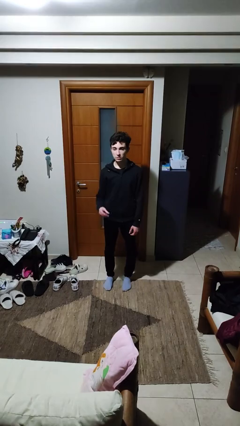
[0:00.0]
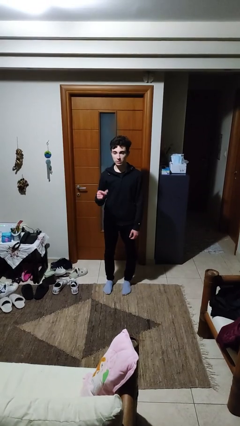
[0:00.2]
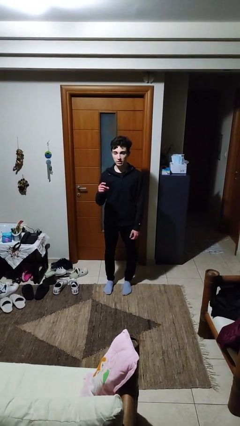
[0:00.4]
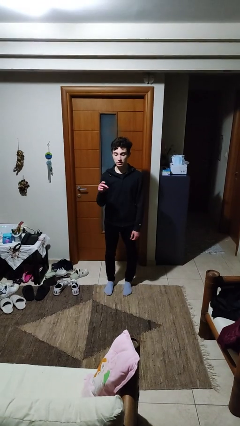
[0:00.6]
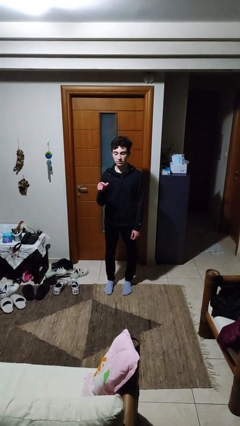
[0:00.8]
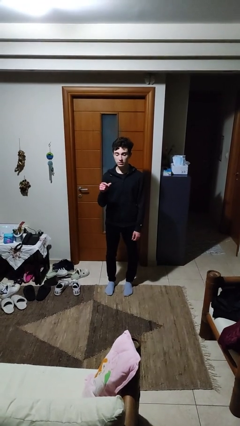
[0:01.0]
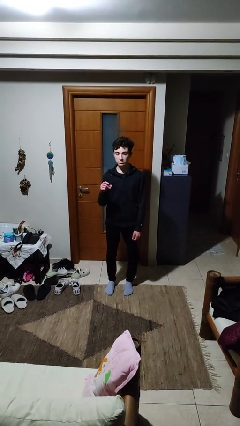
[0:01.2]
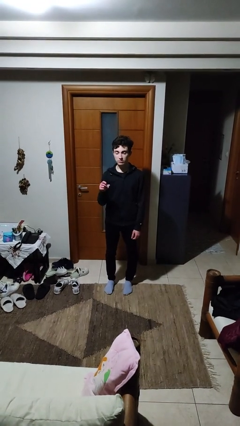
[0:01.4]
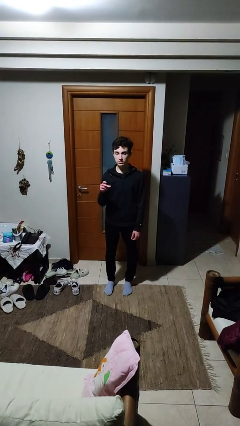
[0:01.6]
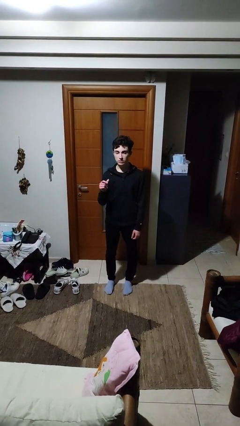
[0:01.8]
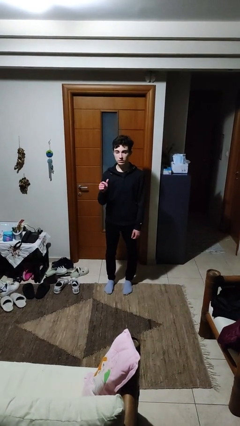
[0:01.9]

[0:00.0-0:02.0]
person snaps fingers

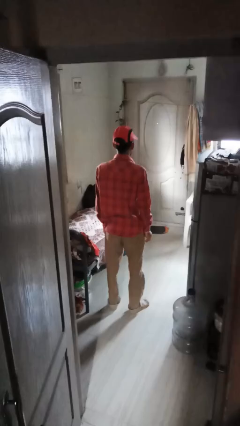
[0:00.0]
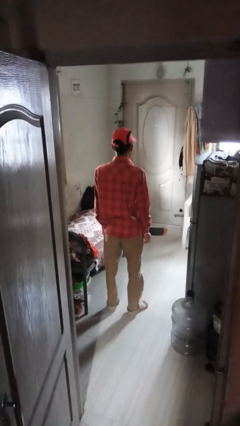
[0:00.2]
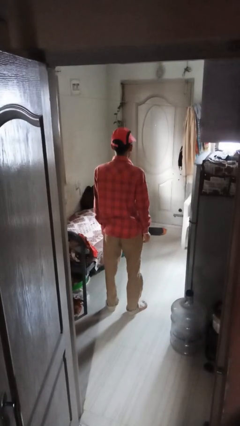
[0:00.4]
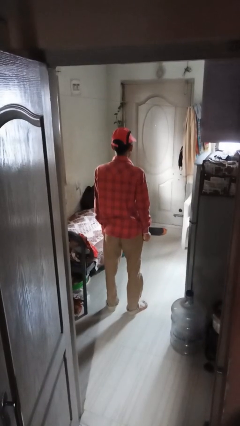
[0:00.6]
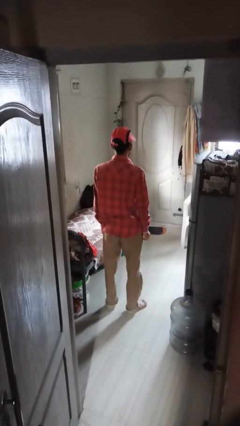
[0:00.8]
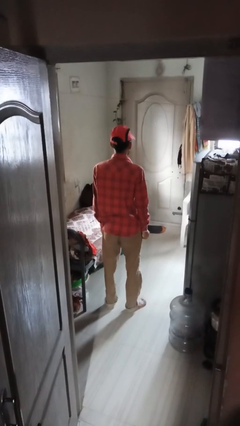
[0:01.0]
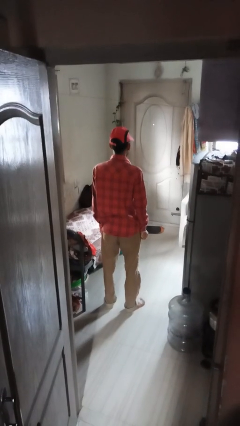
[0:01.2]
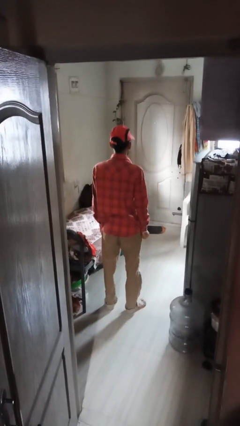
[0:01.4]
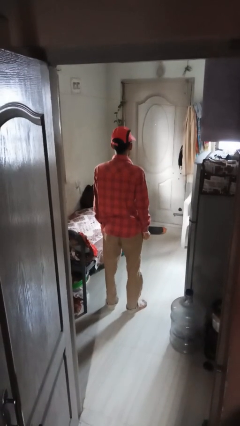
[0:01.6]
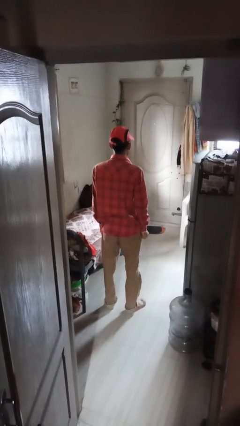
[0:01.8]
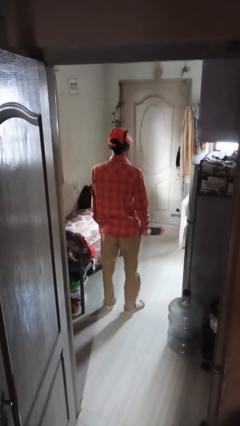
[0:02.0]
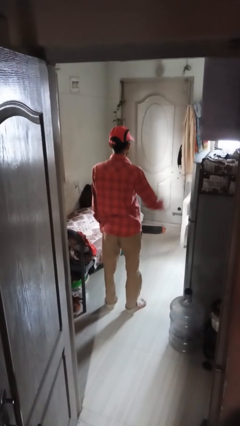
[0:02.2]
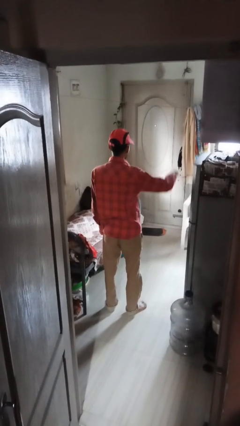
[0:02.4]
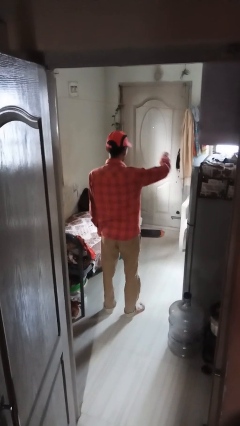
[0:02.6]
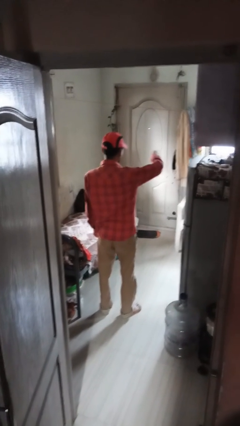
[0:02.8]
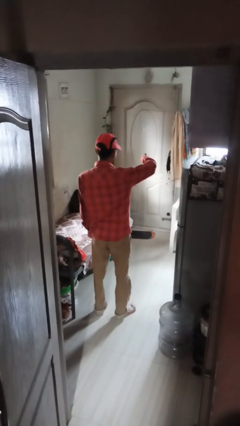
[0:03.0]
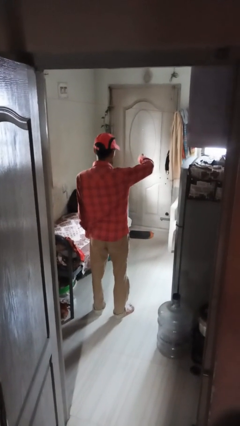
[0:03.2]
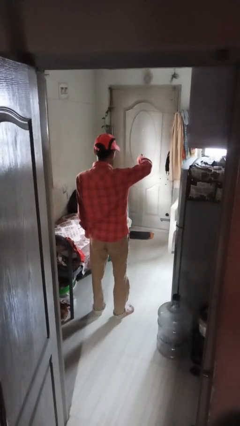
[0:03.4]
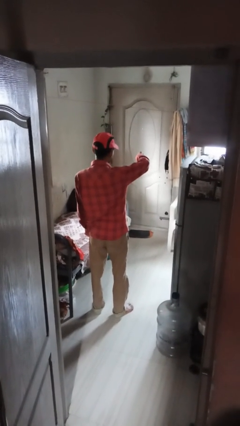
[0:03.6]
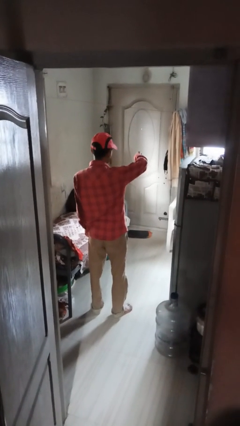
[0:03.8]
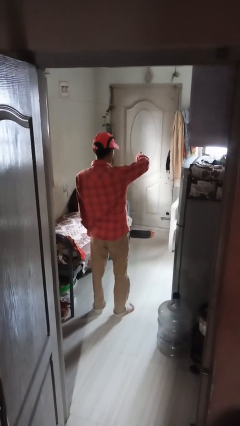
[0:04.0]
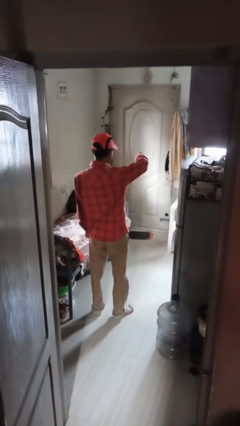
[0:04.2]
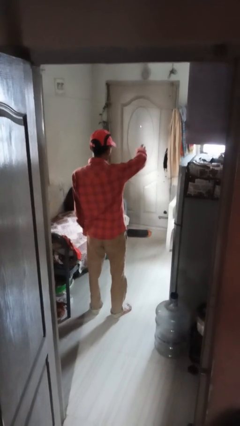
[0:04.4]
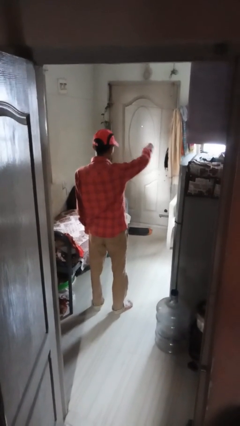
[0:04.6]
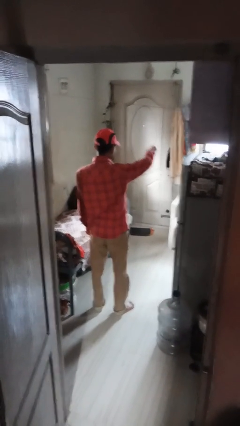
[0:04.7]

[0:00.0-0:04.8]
person gestures thumbs down

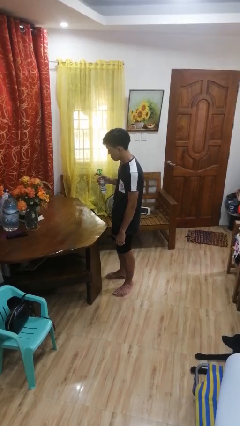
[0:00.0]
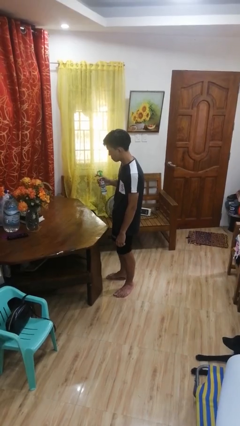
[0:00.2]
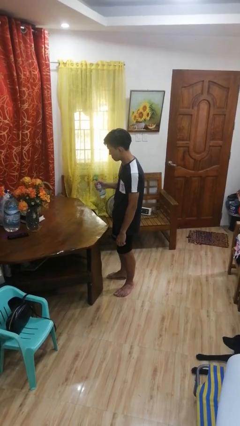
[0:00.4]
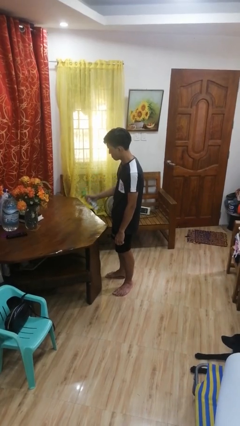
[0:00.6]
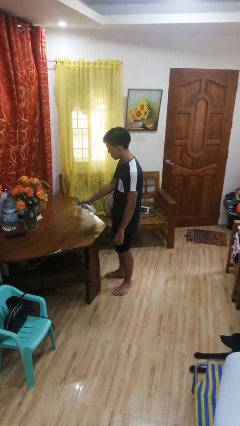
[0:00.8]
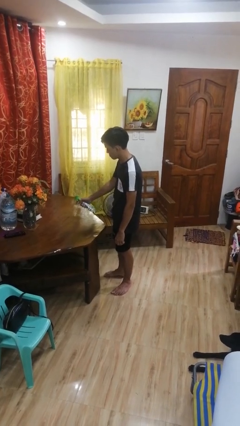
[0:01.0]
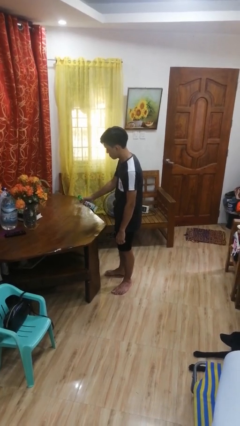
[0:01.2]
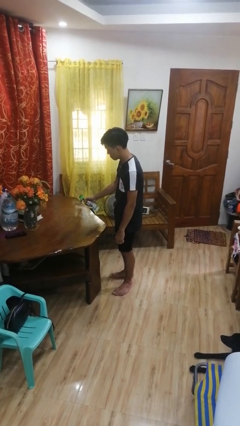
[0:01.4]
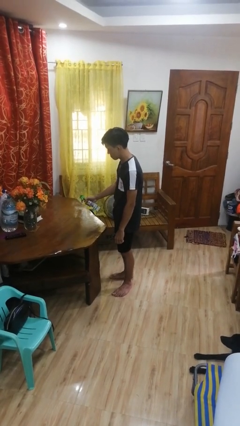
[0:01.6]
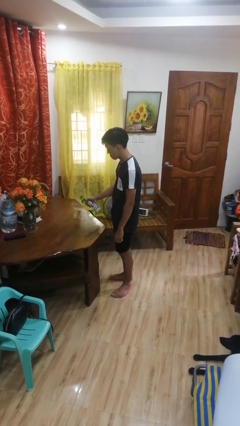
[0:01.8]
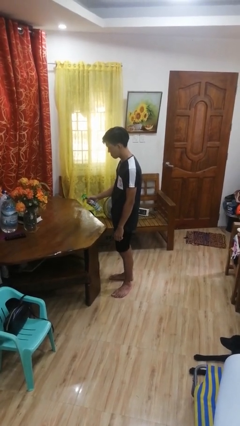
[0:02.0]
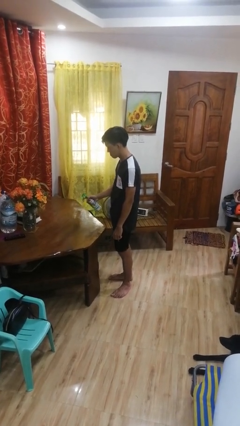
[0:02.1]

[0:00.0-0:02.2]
person sprays from bottle

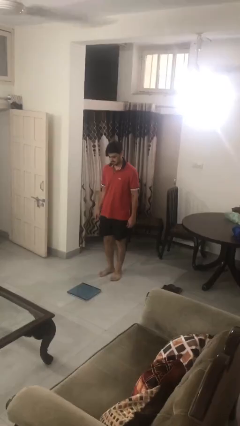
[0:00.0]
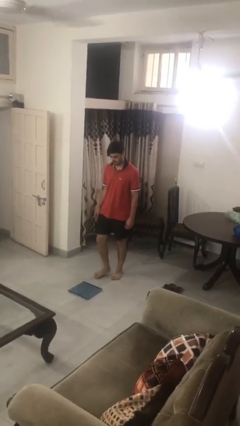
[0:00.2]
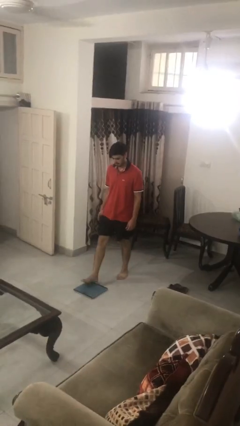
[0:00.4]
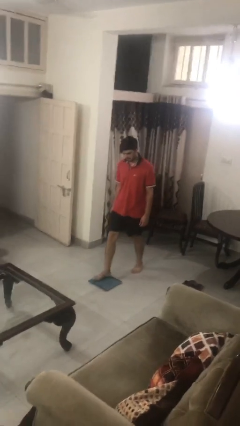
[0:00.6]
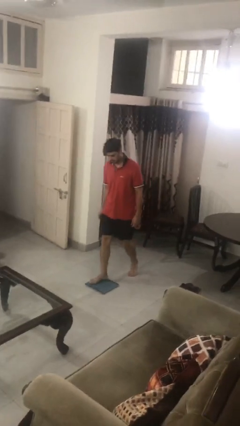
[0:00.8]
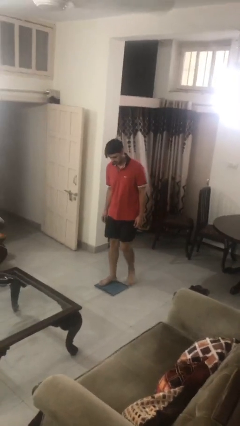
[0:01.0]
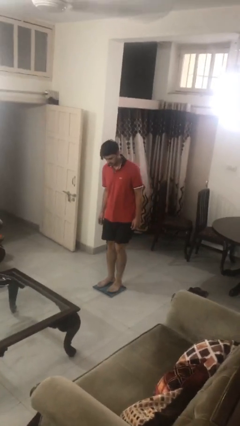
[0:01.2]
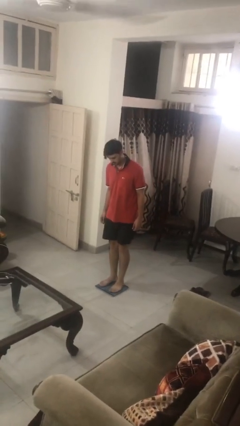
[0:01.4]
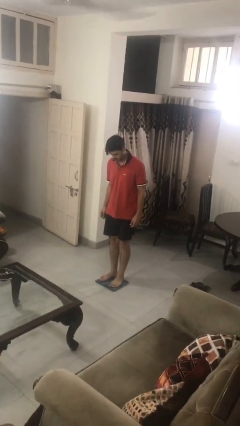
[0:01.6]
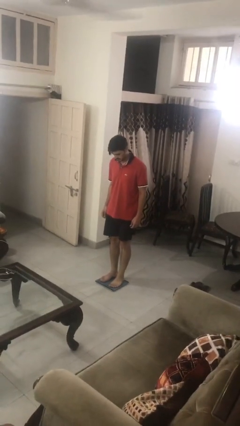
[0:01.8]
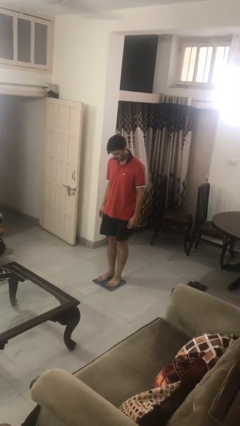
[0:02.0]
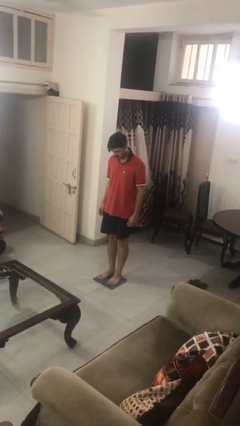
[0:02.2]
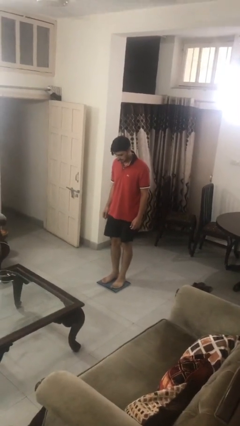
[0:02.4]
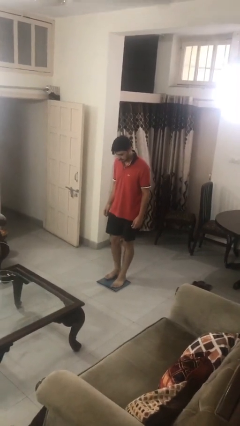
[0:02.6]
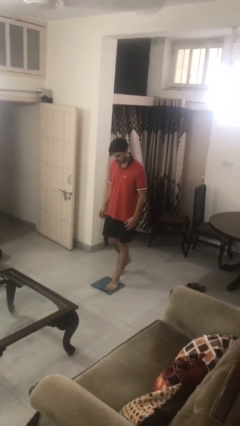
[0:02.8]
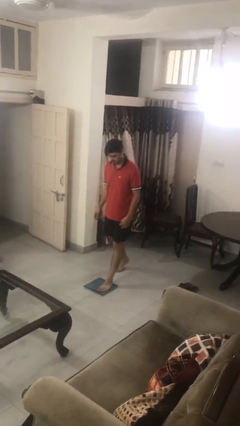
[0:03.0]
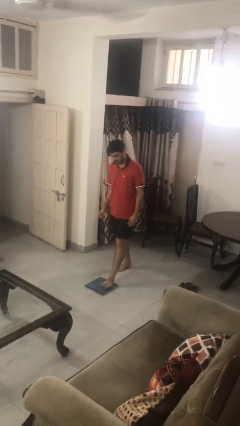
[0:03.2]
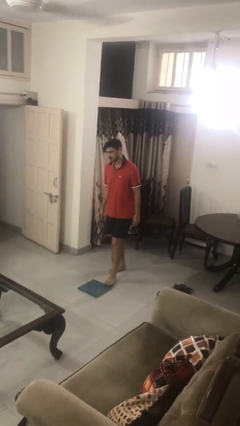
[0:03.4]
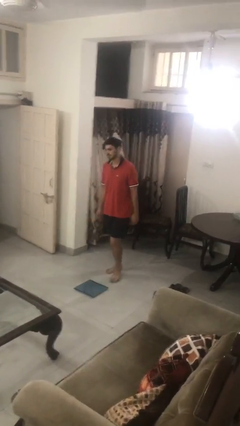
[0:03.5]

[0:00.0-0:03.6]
person uses bodyweight scale

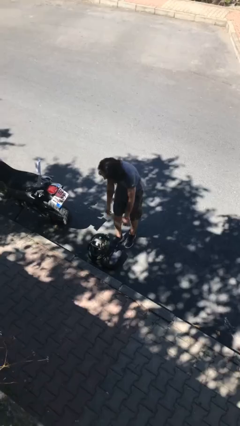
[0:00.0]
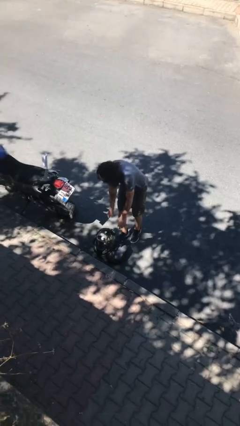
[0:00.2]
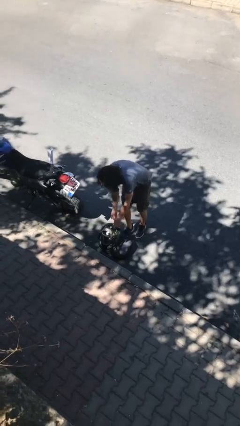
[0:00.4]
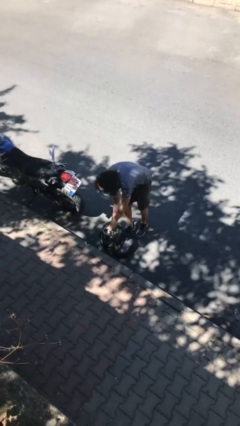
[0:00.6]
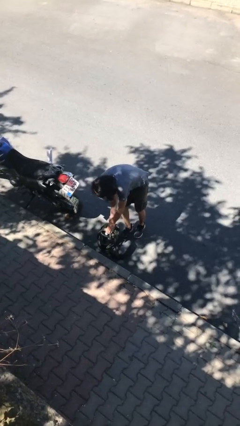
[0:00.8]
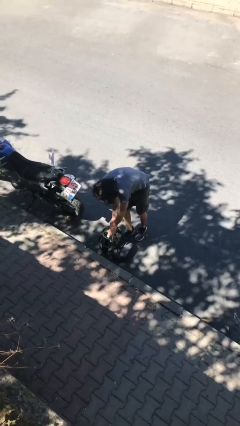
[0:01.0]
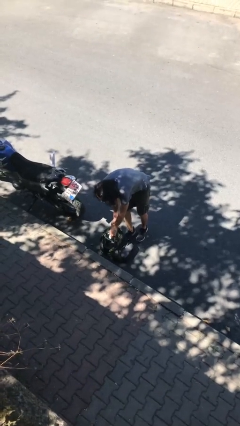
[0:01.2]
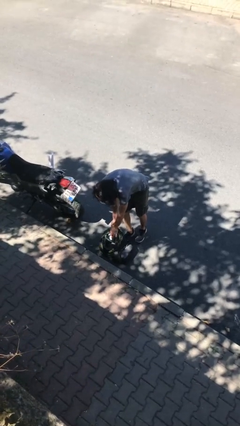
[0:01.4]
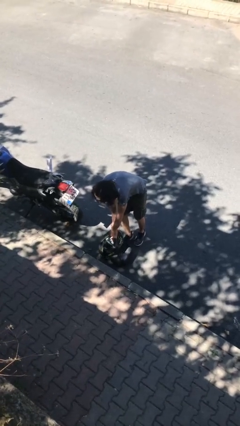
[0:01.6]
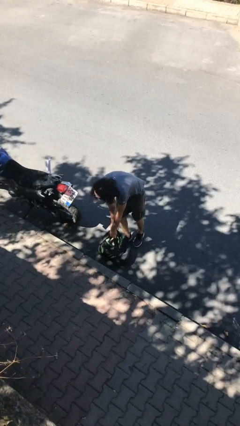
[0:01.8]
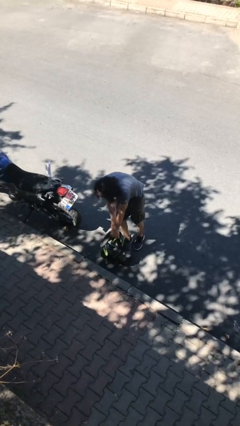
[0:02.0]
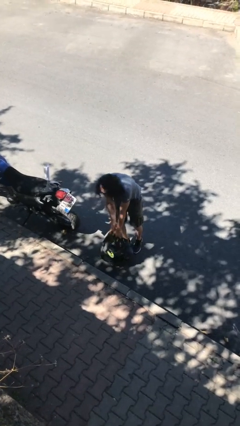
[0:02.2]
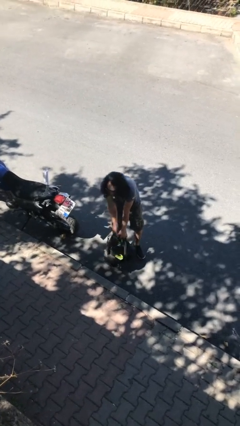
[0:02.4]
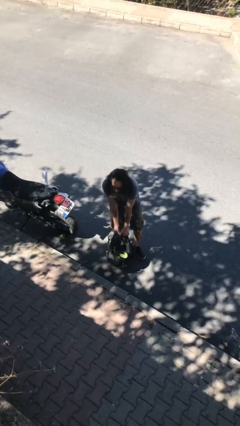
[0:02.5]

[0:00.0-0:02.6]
person picks up object from floor

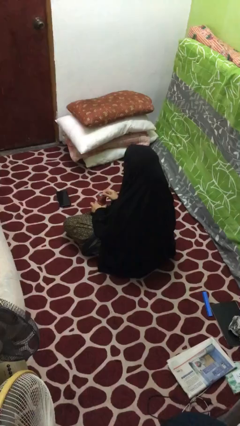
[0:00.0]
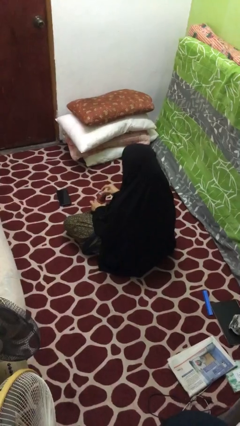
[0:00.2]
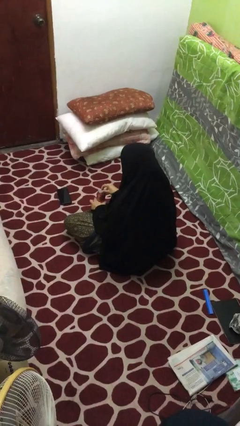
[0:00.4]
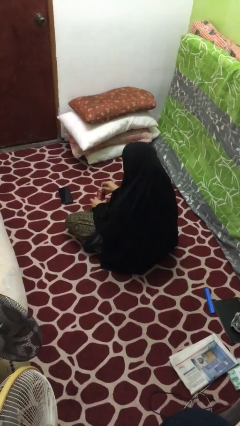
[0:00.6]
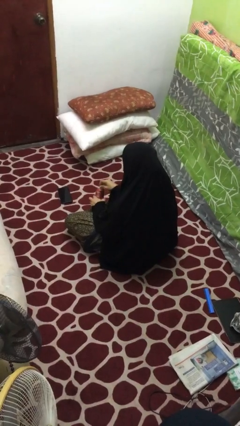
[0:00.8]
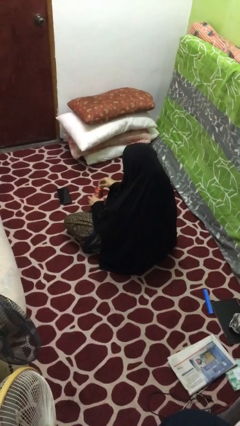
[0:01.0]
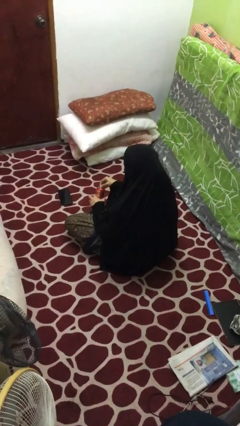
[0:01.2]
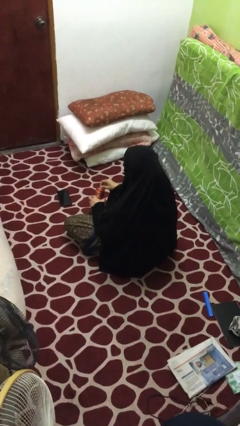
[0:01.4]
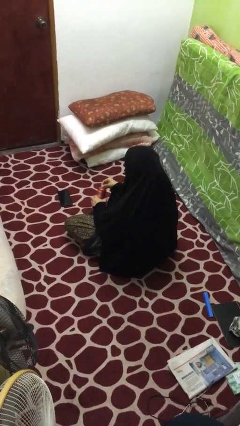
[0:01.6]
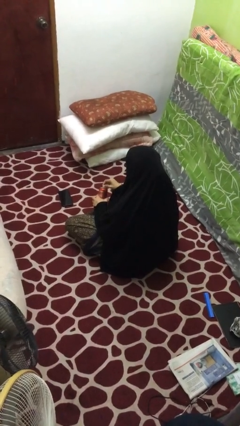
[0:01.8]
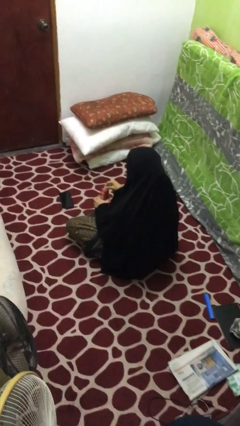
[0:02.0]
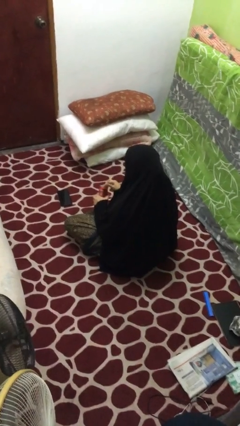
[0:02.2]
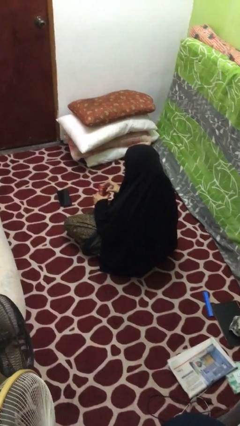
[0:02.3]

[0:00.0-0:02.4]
person opens beverage can
